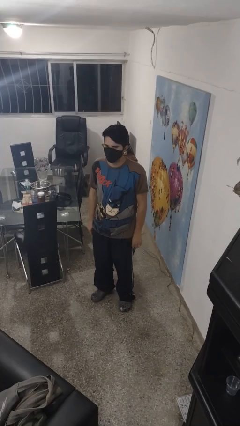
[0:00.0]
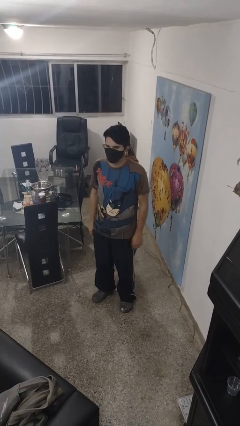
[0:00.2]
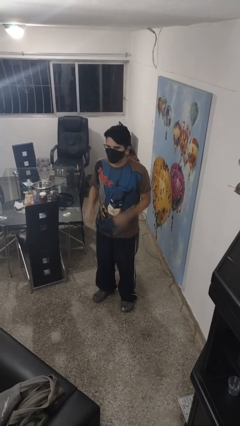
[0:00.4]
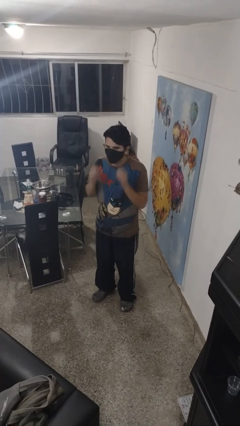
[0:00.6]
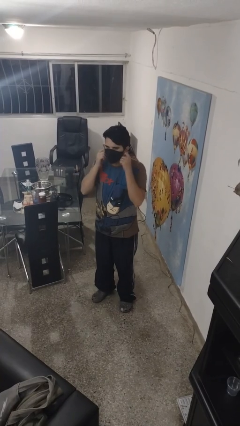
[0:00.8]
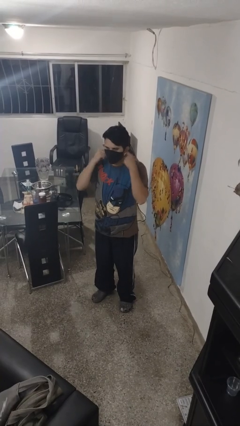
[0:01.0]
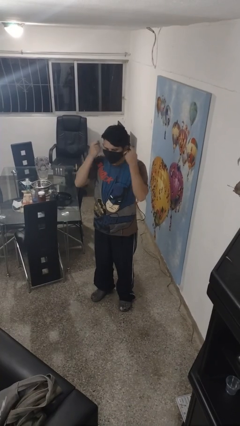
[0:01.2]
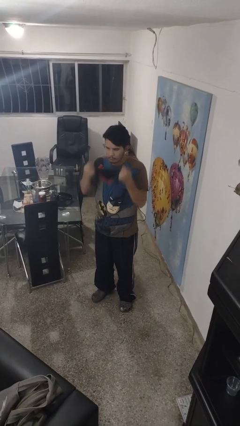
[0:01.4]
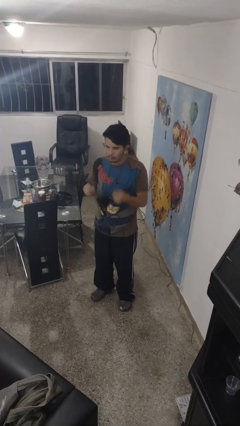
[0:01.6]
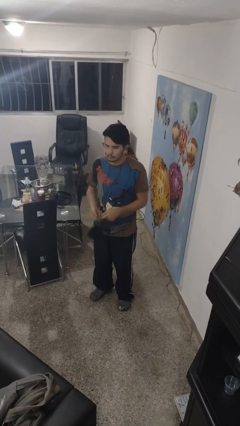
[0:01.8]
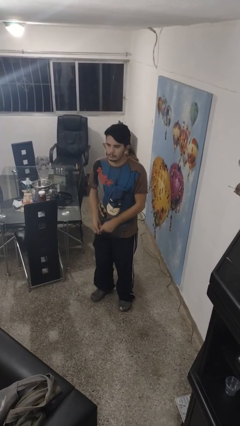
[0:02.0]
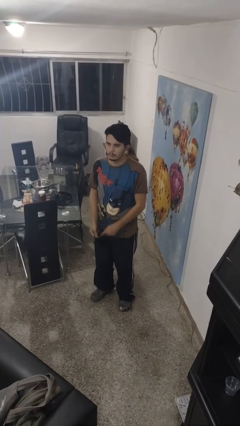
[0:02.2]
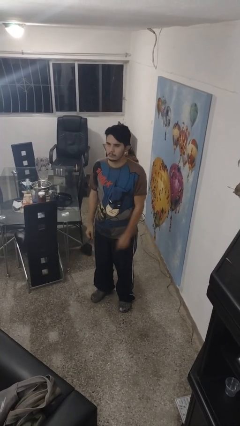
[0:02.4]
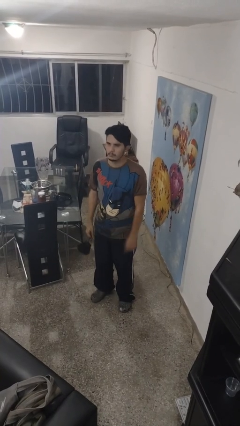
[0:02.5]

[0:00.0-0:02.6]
person takes off facemask

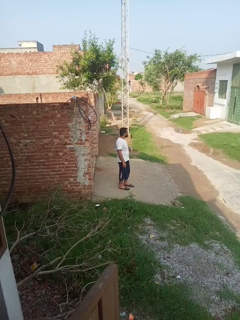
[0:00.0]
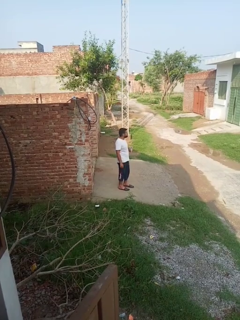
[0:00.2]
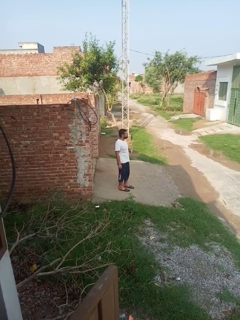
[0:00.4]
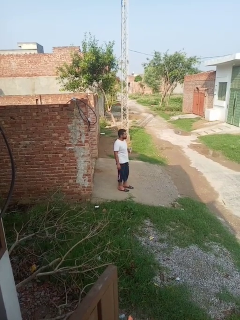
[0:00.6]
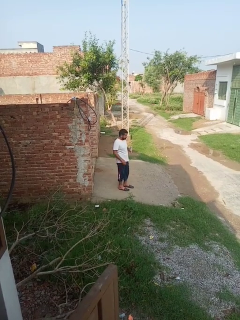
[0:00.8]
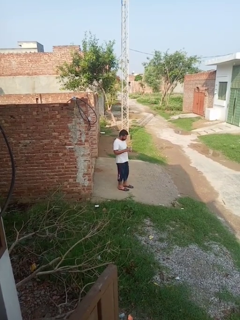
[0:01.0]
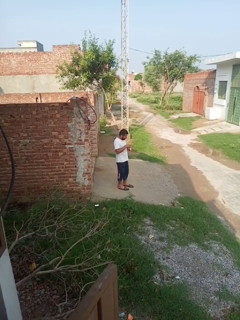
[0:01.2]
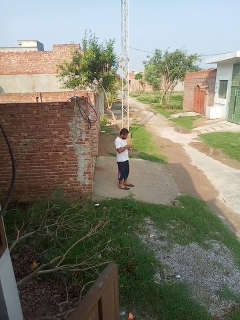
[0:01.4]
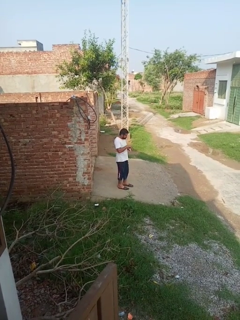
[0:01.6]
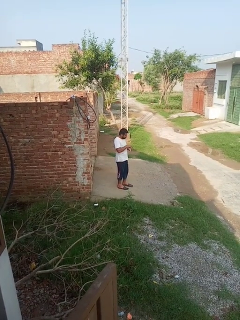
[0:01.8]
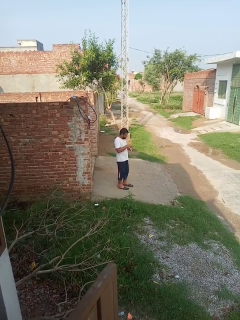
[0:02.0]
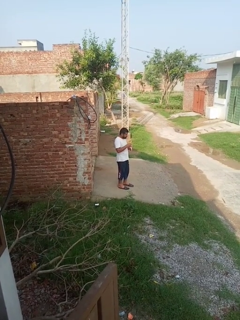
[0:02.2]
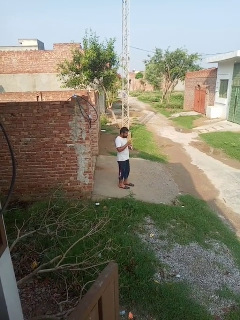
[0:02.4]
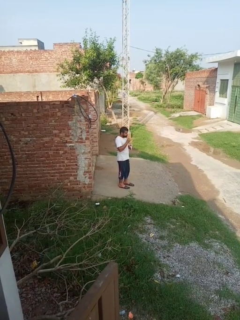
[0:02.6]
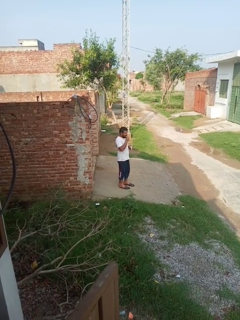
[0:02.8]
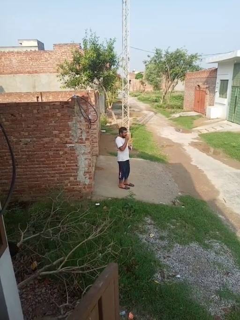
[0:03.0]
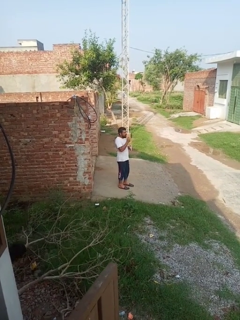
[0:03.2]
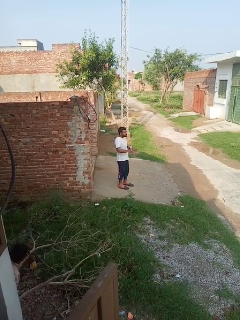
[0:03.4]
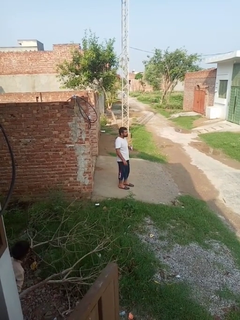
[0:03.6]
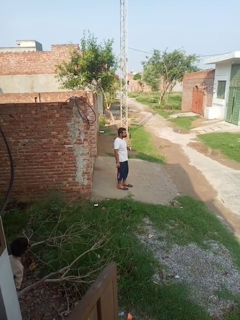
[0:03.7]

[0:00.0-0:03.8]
person eats snack from bag

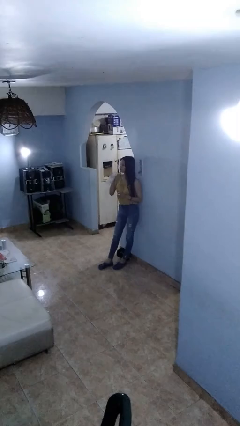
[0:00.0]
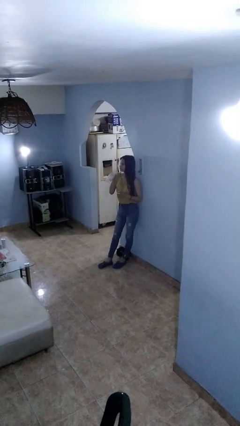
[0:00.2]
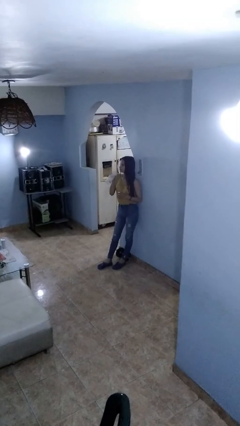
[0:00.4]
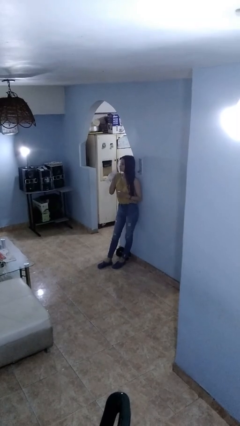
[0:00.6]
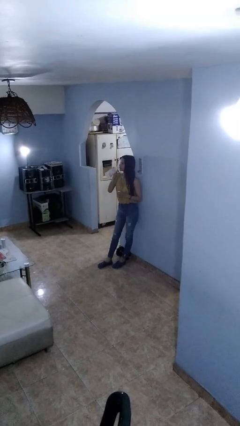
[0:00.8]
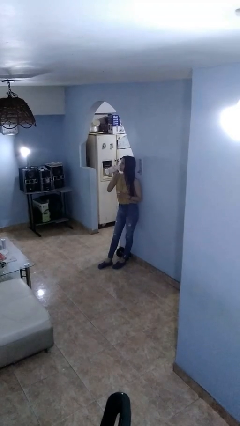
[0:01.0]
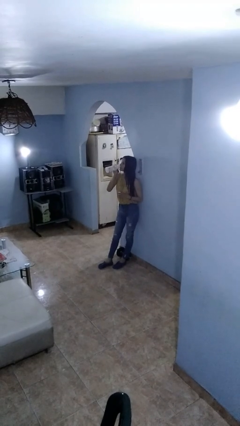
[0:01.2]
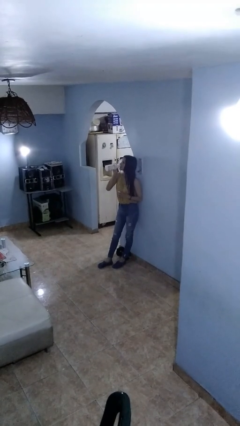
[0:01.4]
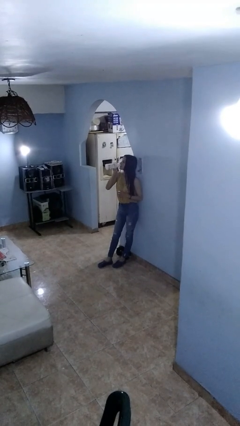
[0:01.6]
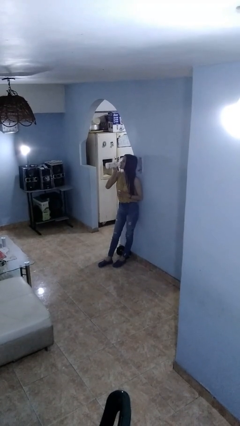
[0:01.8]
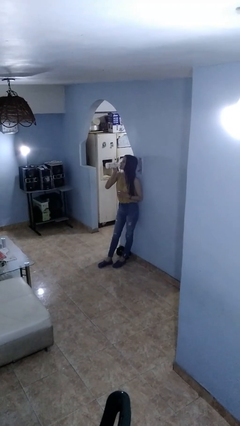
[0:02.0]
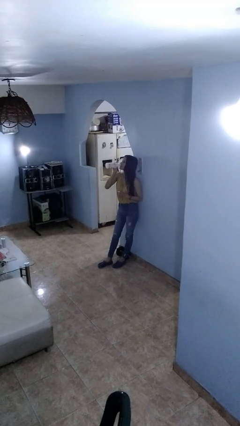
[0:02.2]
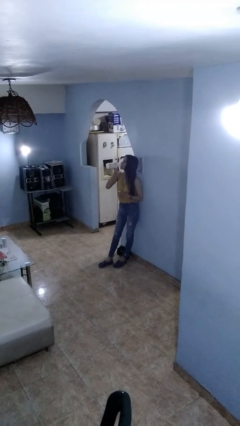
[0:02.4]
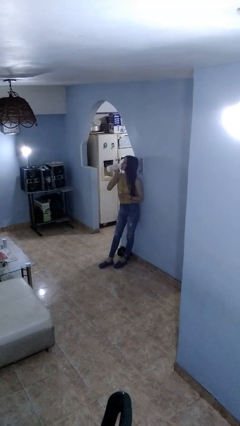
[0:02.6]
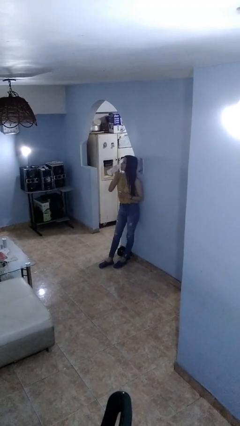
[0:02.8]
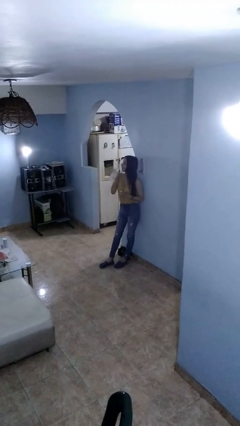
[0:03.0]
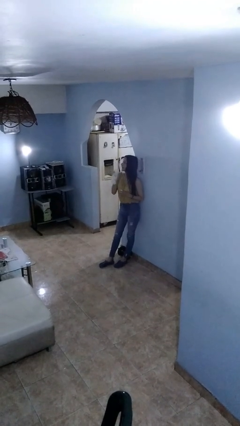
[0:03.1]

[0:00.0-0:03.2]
person drinks from bottle

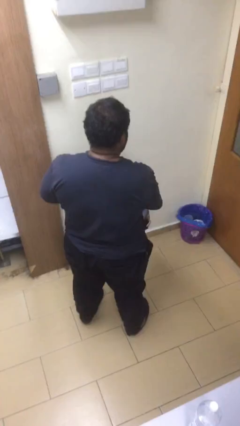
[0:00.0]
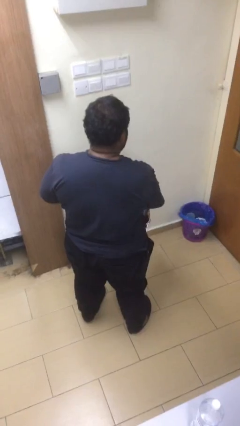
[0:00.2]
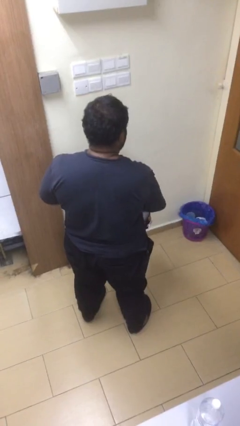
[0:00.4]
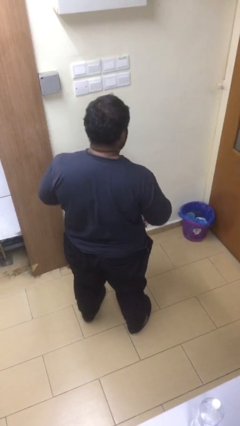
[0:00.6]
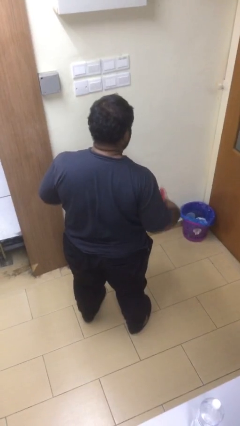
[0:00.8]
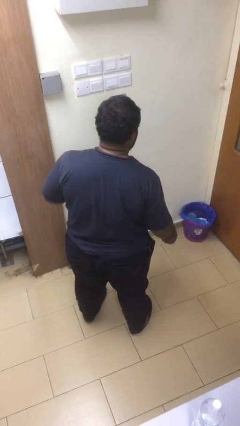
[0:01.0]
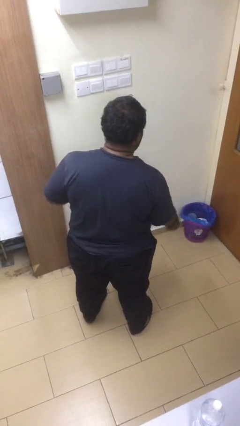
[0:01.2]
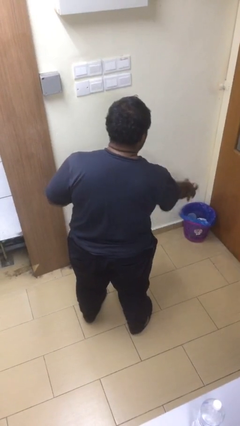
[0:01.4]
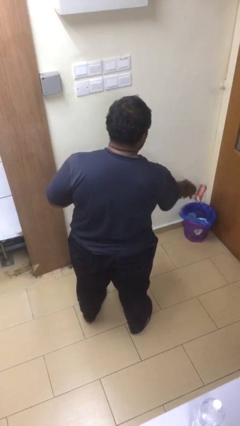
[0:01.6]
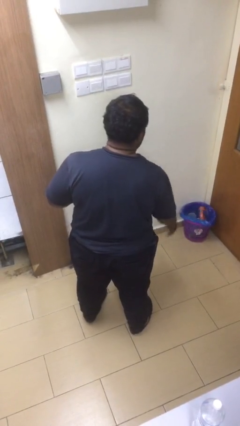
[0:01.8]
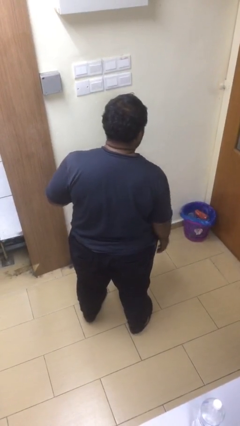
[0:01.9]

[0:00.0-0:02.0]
person discards trash

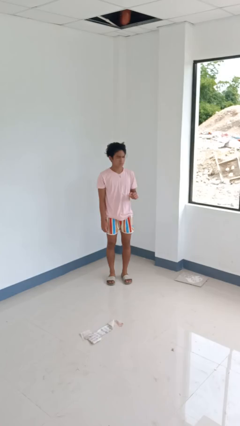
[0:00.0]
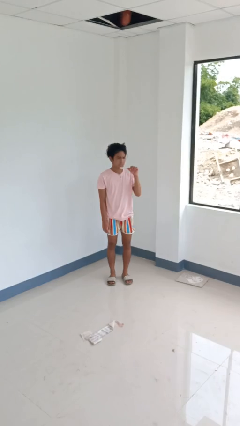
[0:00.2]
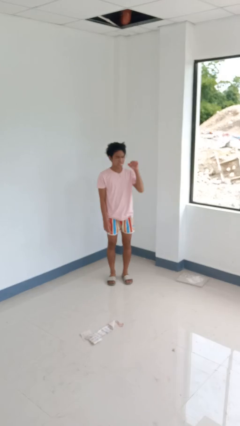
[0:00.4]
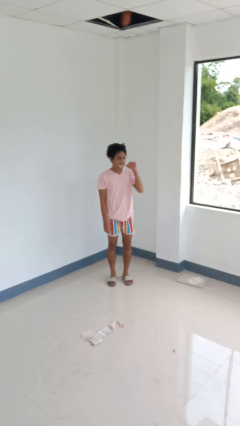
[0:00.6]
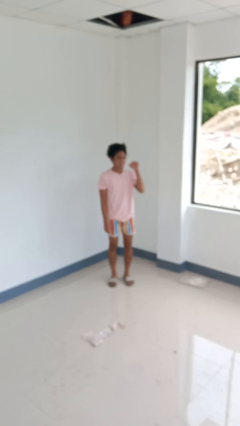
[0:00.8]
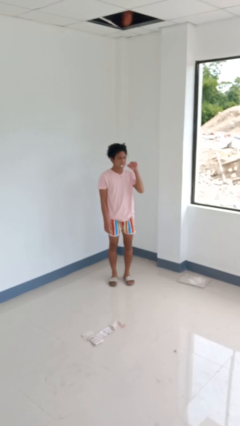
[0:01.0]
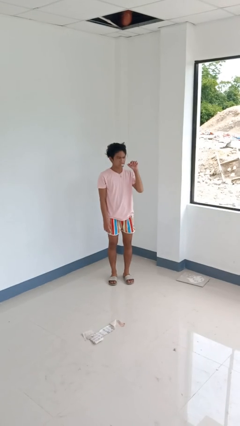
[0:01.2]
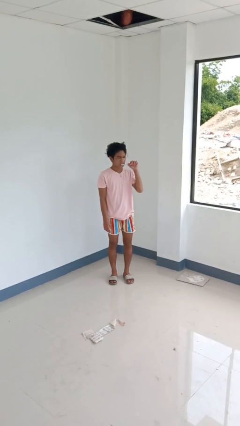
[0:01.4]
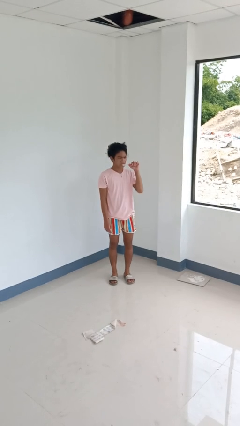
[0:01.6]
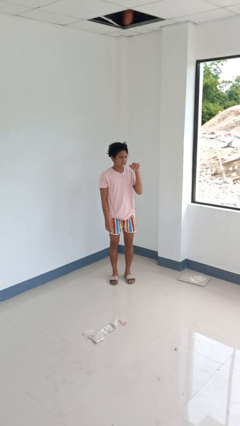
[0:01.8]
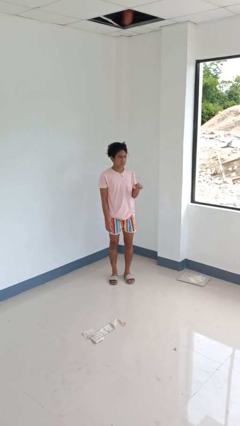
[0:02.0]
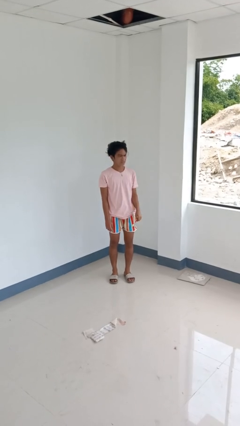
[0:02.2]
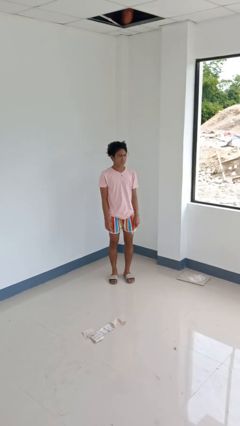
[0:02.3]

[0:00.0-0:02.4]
person brushes teeth

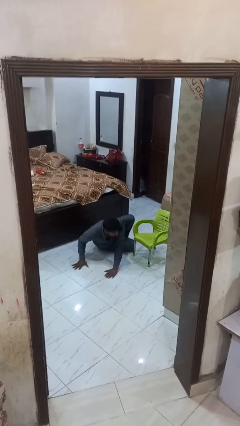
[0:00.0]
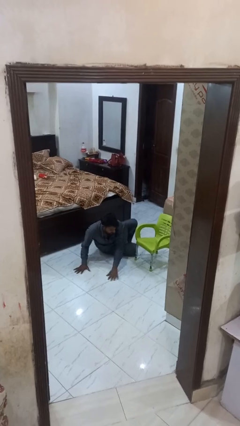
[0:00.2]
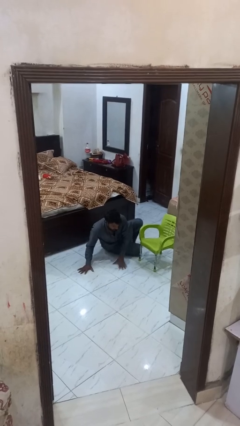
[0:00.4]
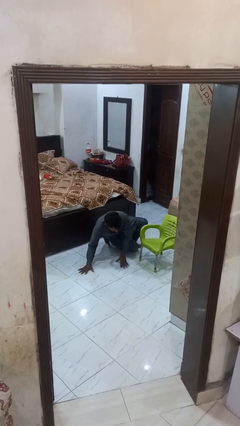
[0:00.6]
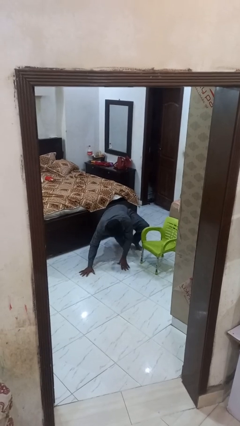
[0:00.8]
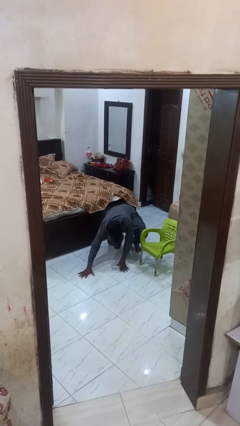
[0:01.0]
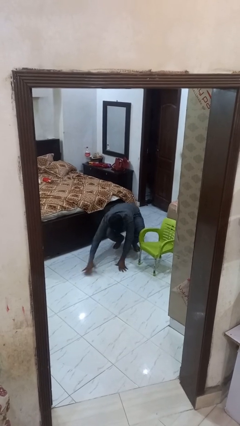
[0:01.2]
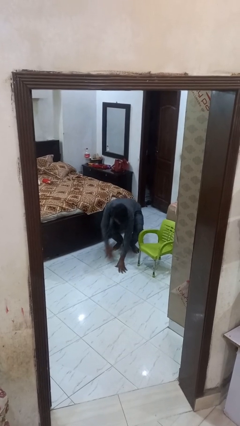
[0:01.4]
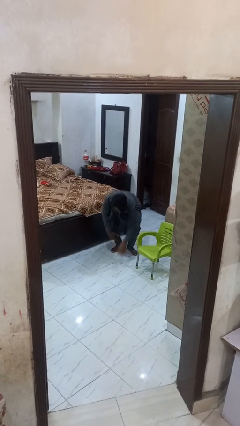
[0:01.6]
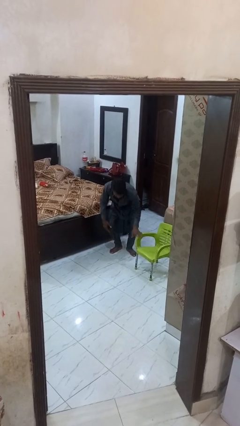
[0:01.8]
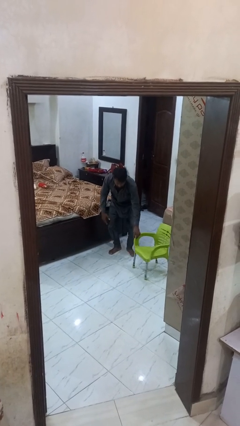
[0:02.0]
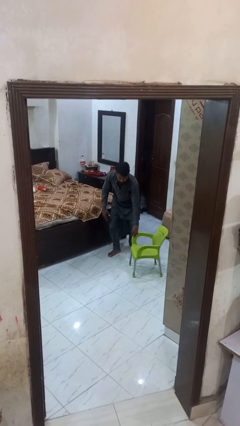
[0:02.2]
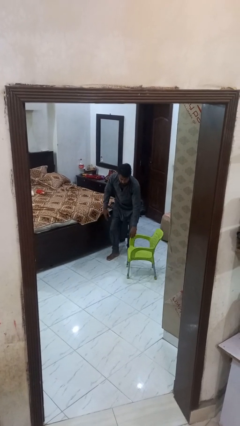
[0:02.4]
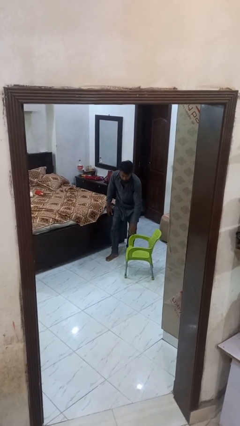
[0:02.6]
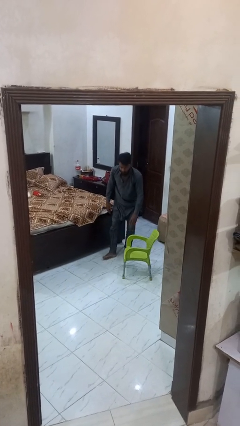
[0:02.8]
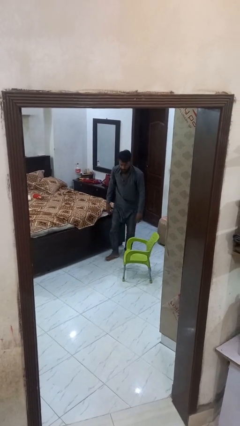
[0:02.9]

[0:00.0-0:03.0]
person stands up from floor

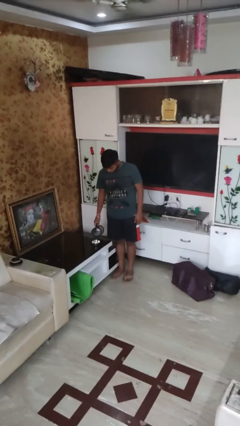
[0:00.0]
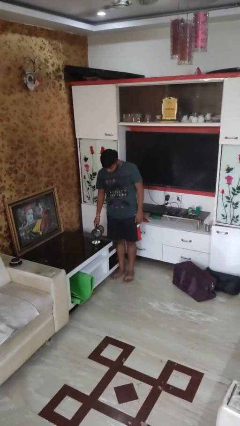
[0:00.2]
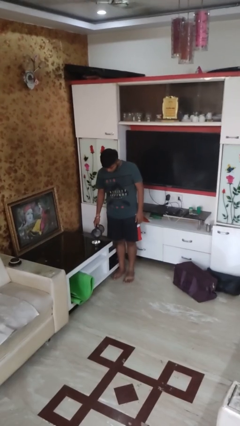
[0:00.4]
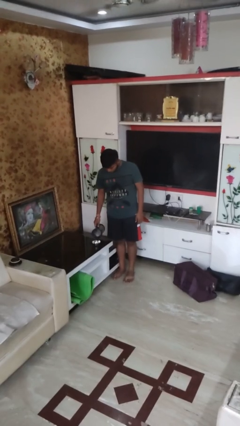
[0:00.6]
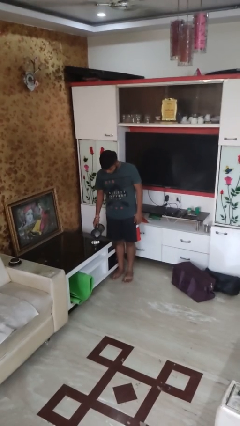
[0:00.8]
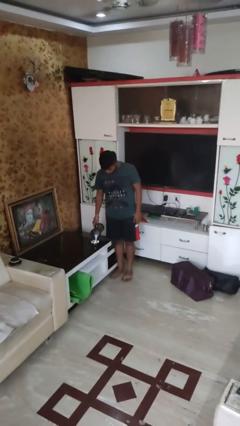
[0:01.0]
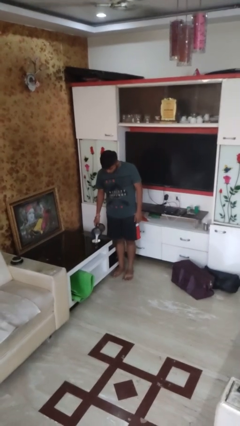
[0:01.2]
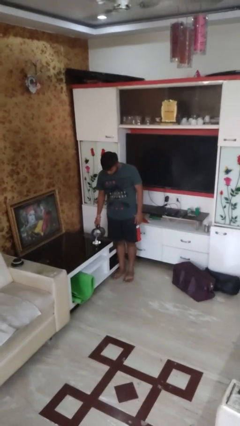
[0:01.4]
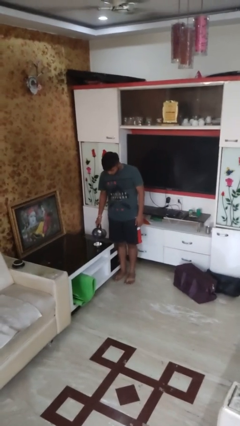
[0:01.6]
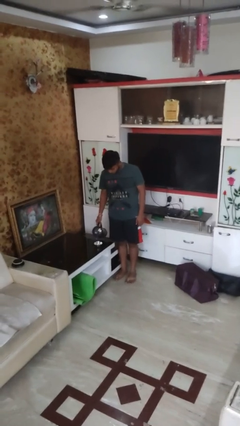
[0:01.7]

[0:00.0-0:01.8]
person pours into bowl
